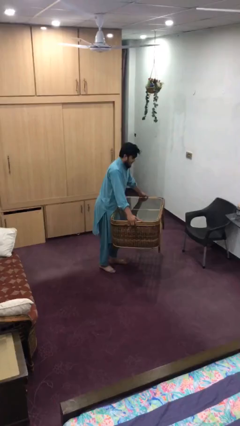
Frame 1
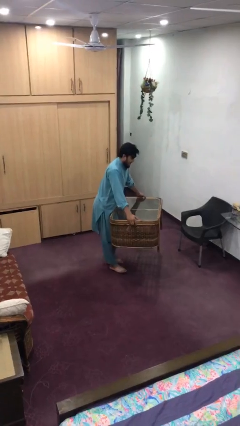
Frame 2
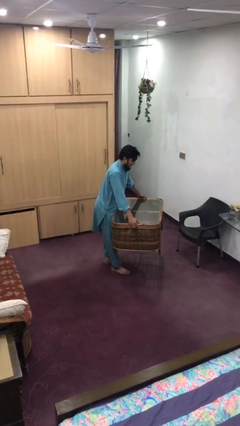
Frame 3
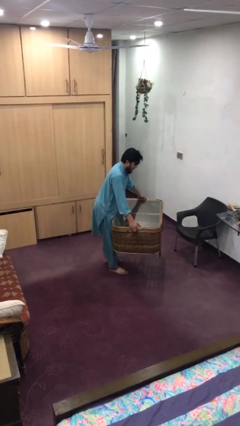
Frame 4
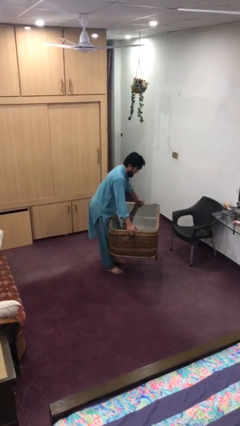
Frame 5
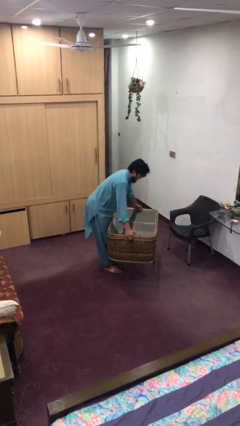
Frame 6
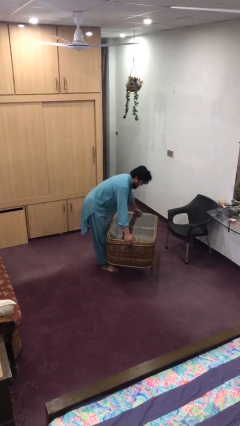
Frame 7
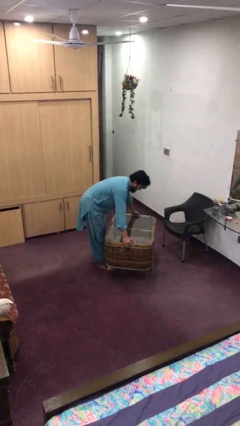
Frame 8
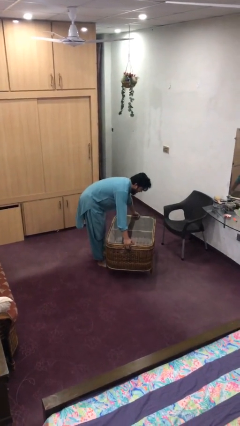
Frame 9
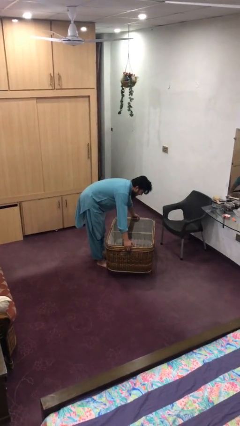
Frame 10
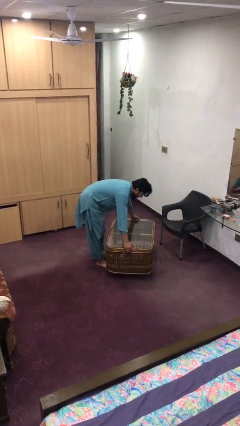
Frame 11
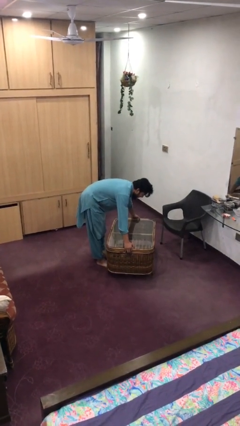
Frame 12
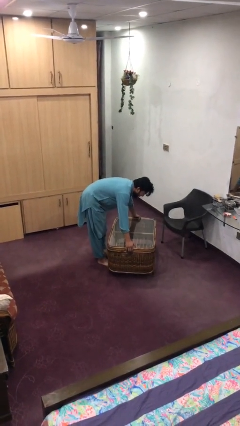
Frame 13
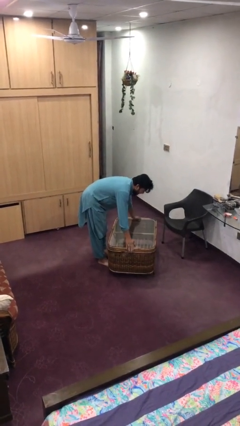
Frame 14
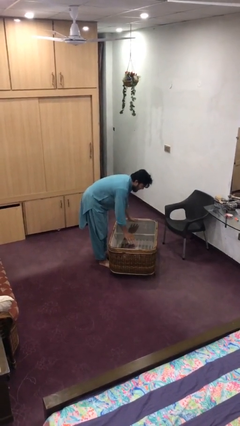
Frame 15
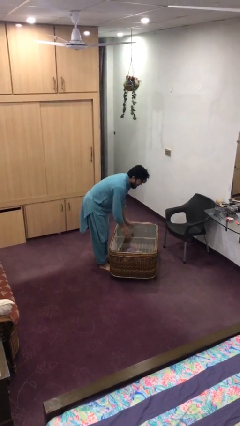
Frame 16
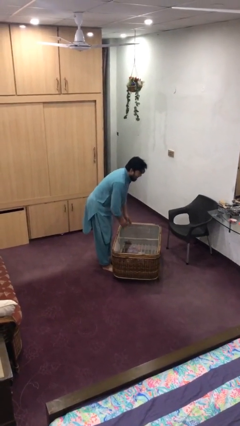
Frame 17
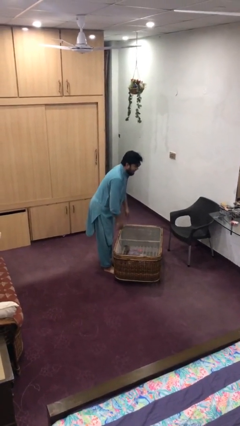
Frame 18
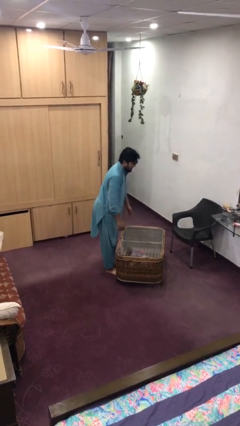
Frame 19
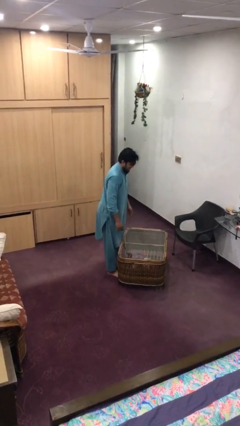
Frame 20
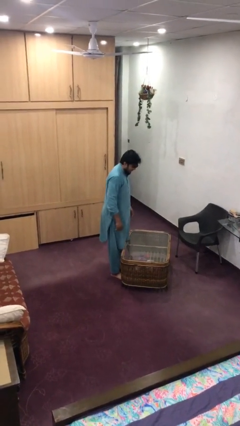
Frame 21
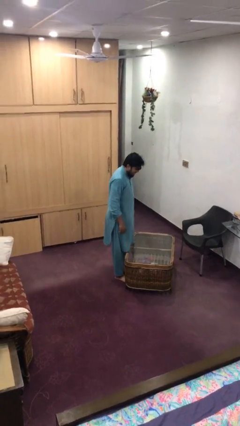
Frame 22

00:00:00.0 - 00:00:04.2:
person puts down object on floor

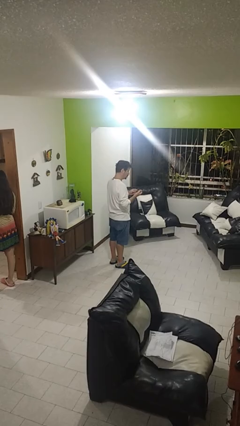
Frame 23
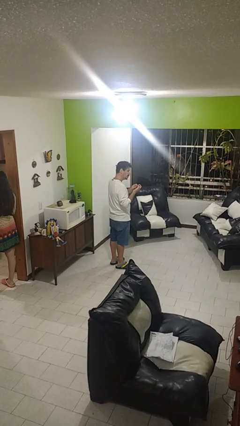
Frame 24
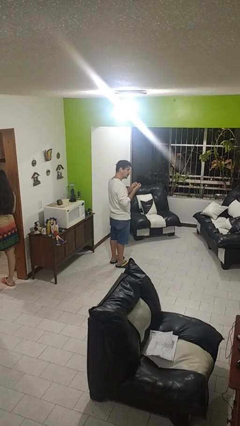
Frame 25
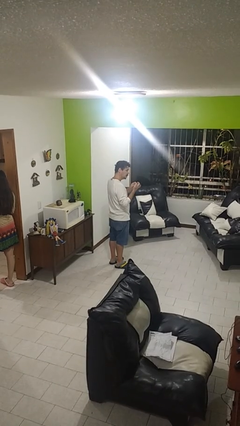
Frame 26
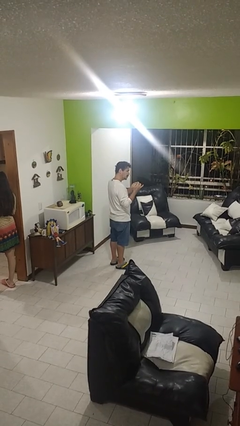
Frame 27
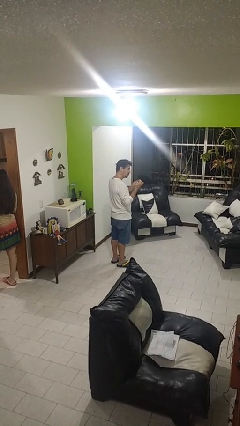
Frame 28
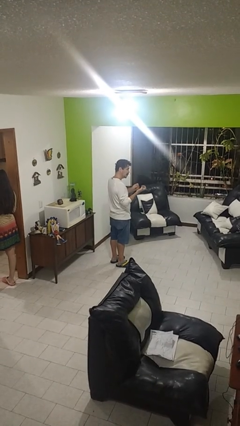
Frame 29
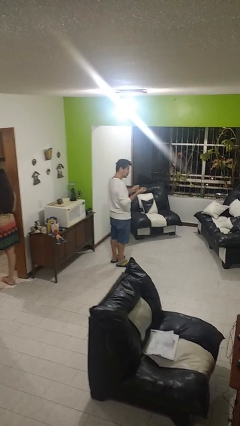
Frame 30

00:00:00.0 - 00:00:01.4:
person files fingernails

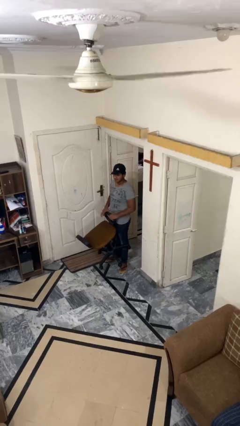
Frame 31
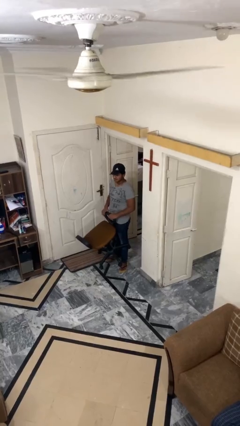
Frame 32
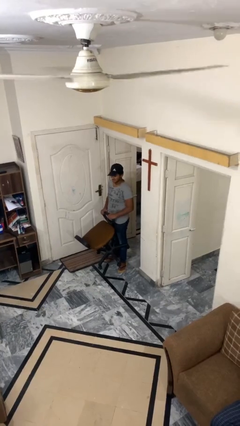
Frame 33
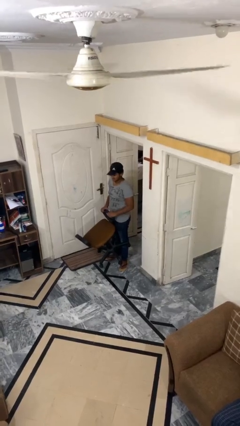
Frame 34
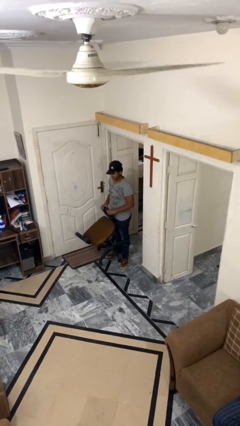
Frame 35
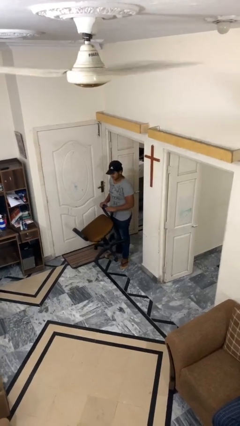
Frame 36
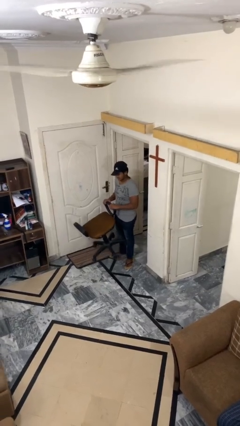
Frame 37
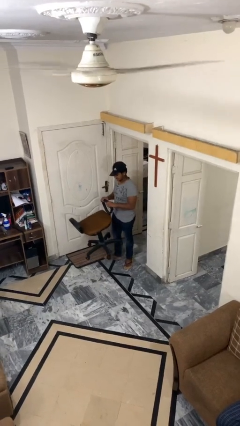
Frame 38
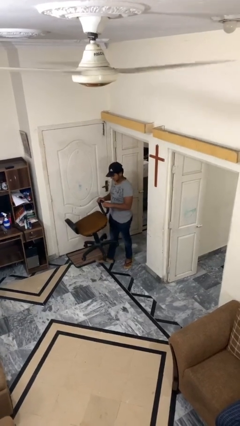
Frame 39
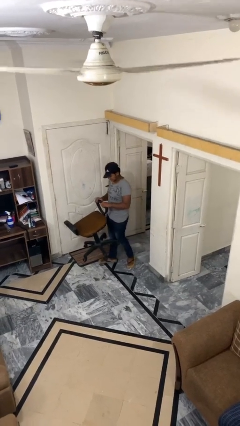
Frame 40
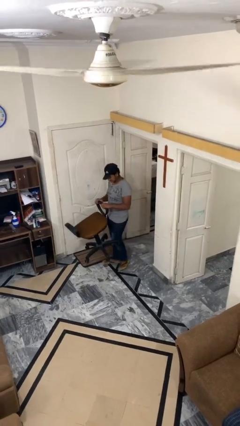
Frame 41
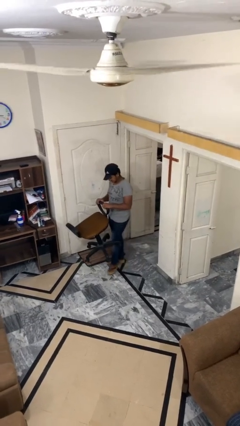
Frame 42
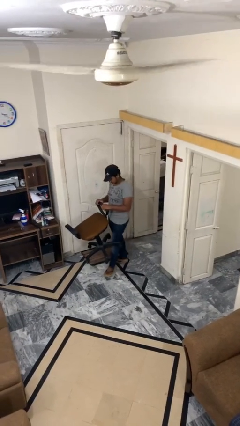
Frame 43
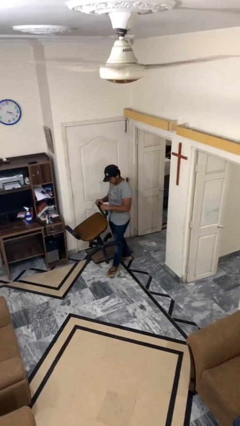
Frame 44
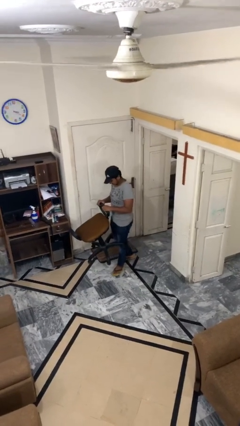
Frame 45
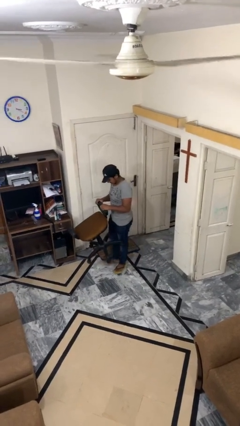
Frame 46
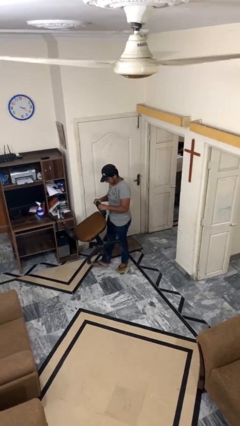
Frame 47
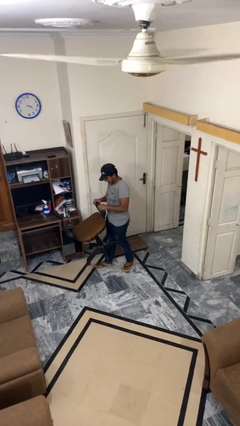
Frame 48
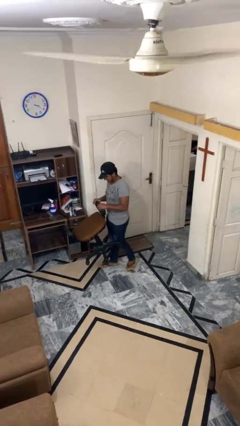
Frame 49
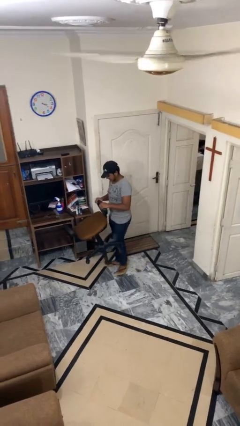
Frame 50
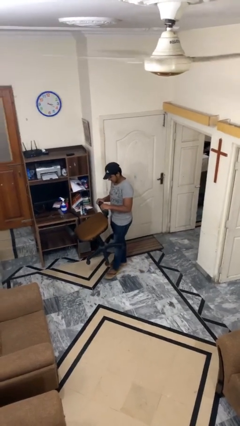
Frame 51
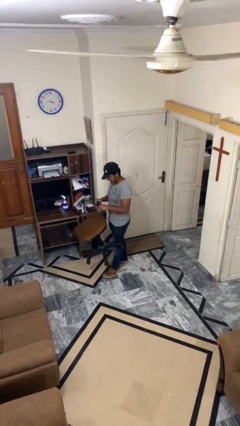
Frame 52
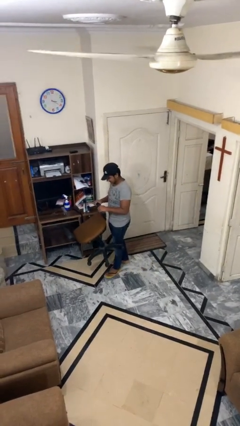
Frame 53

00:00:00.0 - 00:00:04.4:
person carries heavy object

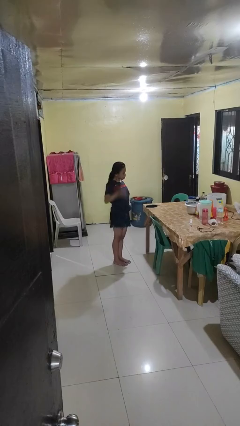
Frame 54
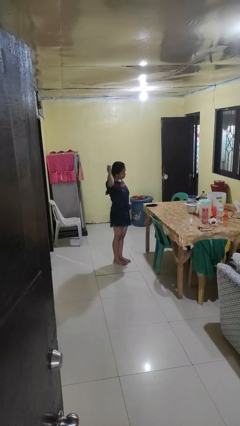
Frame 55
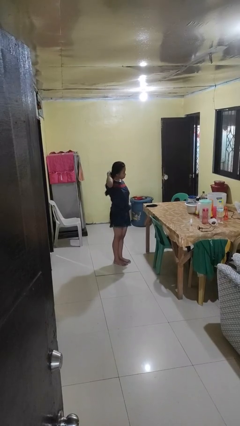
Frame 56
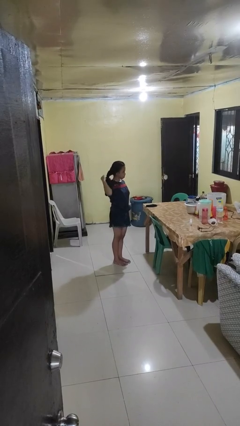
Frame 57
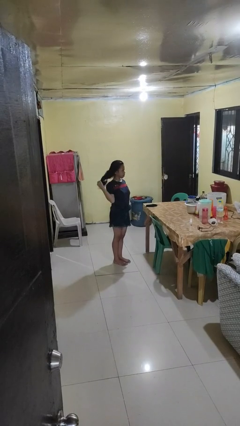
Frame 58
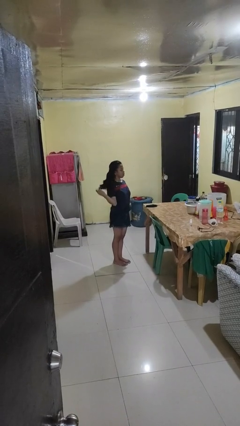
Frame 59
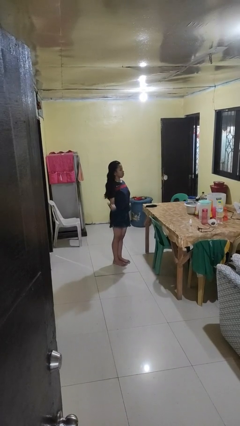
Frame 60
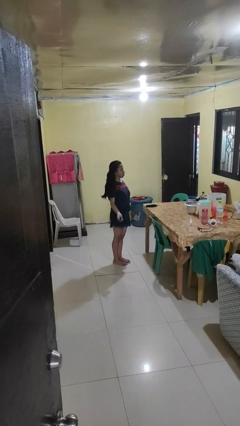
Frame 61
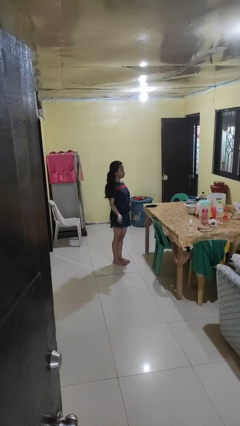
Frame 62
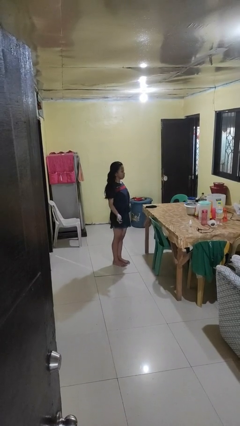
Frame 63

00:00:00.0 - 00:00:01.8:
person takes off hairtie

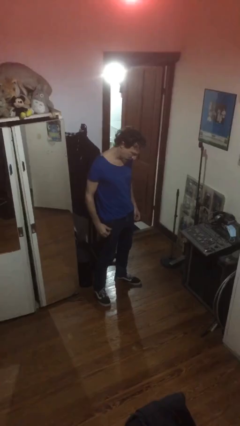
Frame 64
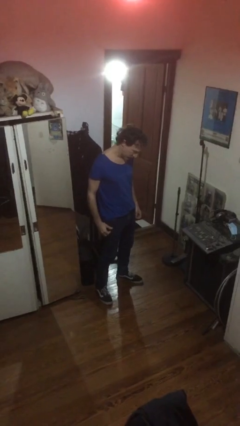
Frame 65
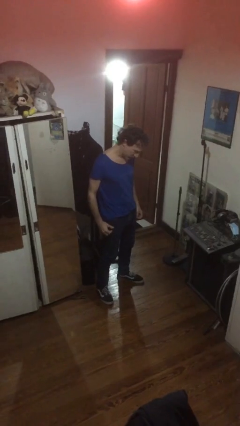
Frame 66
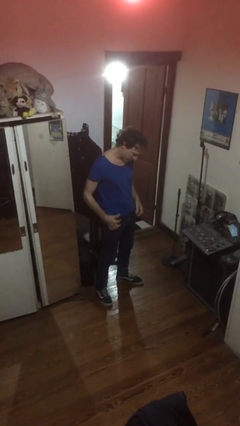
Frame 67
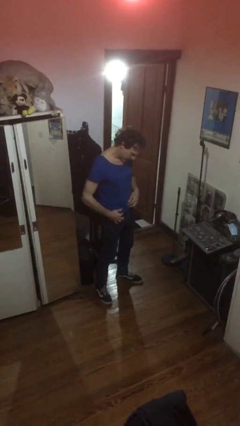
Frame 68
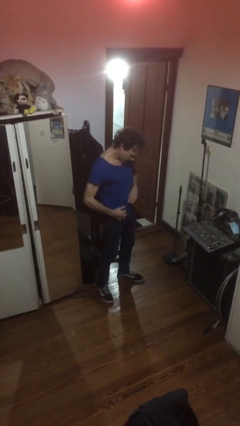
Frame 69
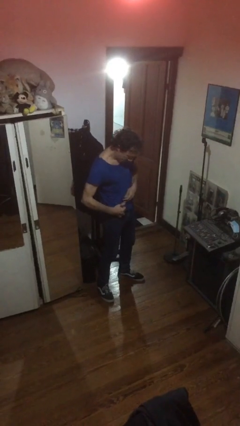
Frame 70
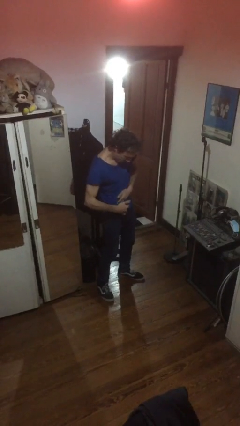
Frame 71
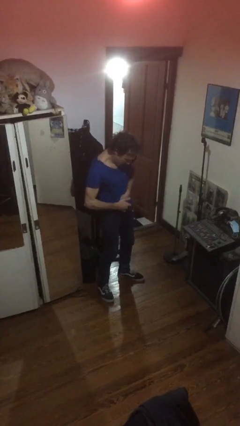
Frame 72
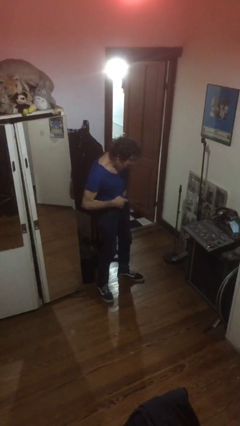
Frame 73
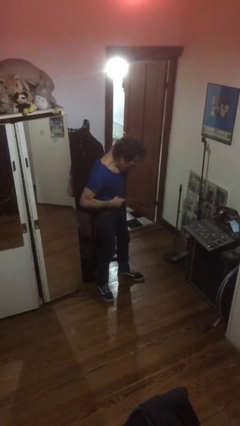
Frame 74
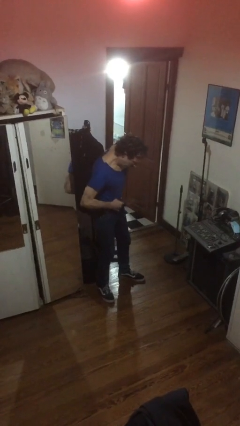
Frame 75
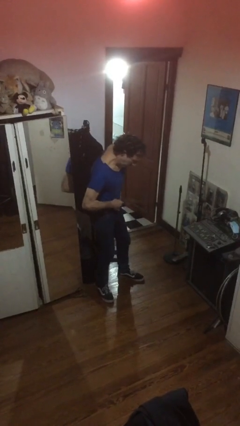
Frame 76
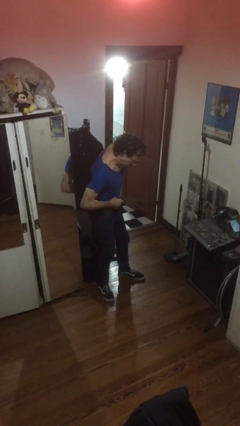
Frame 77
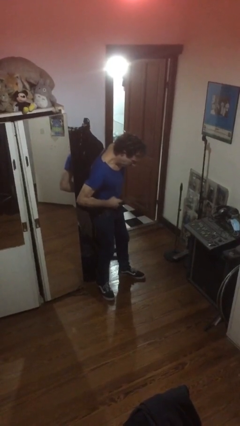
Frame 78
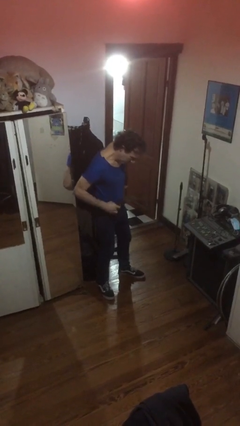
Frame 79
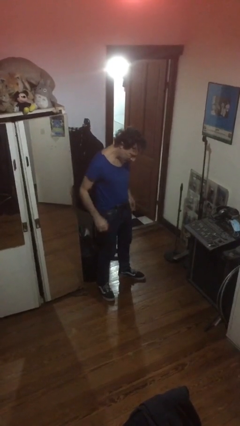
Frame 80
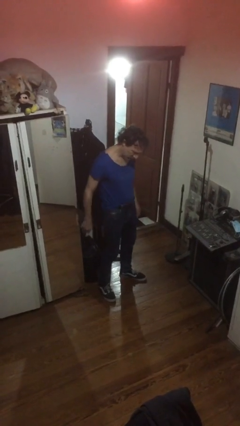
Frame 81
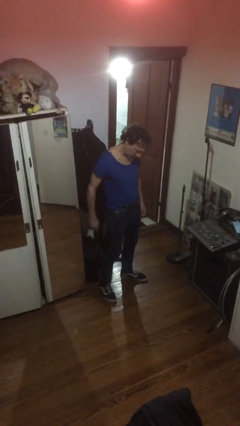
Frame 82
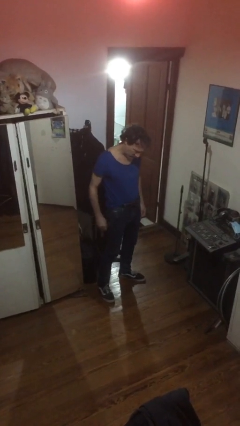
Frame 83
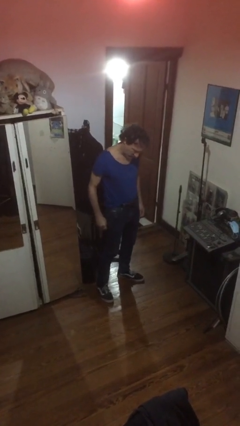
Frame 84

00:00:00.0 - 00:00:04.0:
person tucks in shirt

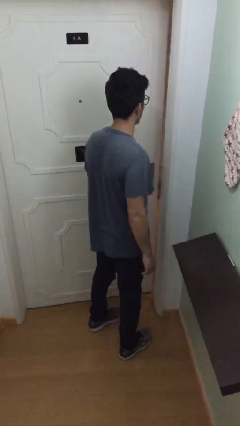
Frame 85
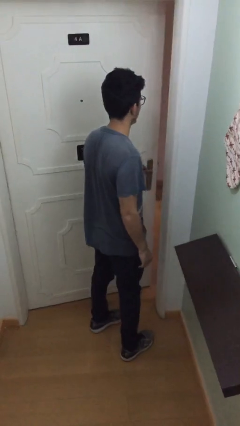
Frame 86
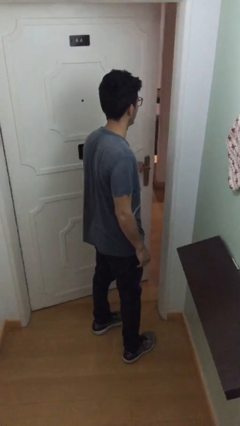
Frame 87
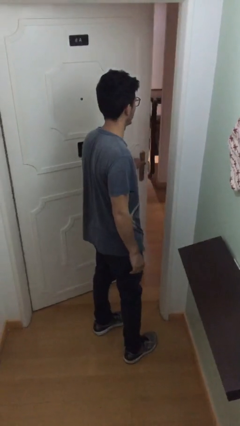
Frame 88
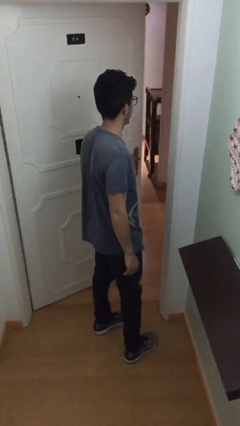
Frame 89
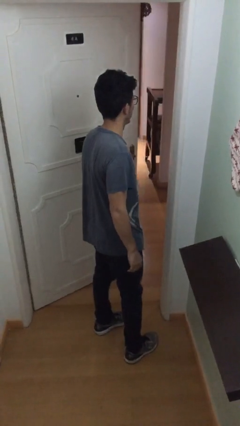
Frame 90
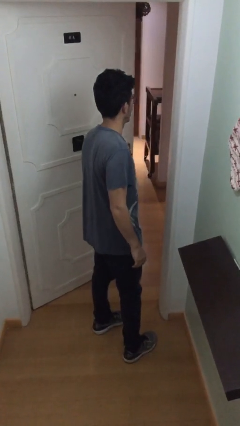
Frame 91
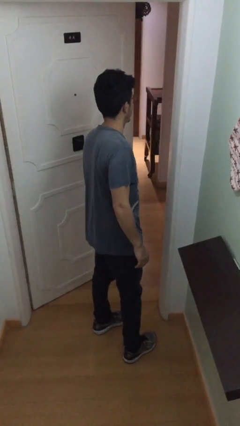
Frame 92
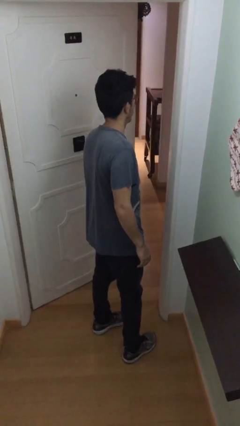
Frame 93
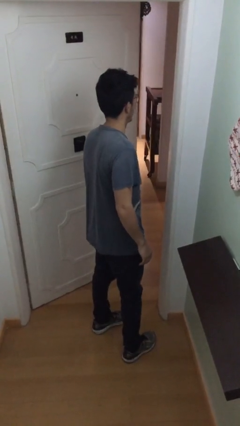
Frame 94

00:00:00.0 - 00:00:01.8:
person opens facility door
